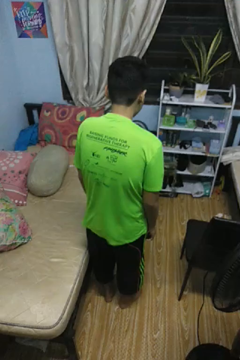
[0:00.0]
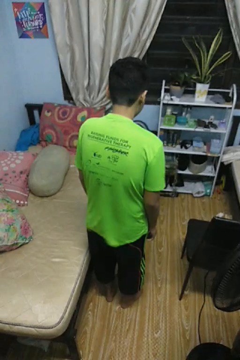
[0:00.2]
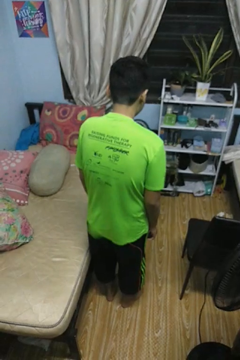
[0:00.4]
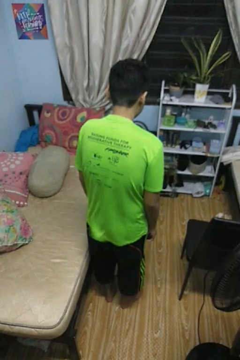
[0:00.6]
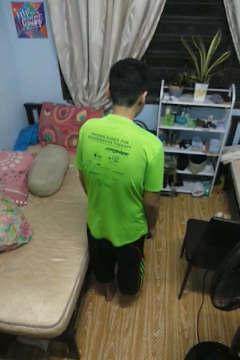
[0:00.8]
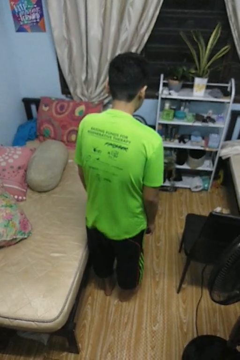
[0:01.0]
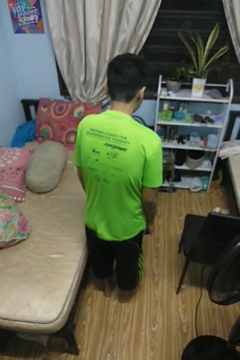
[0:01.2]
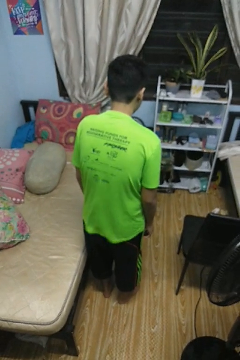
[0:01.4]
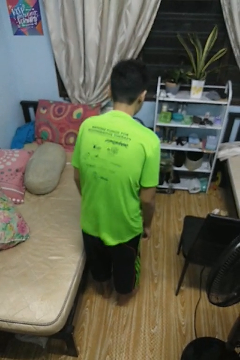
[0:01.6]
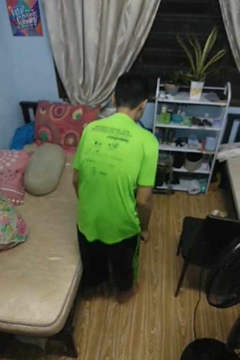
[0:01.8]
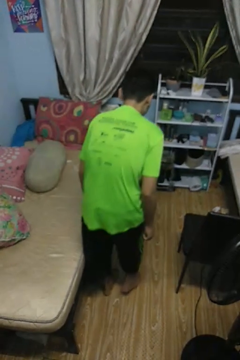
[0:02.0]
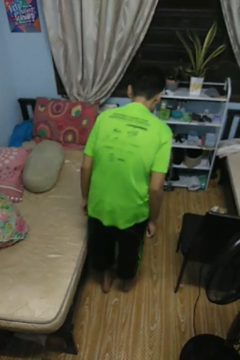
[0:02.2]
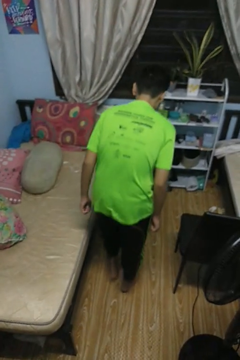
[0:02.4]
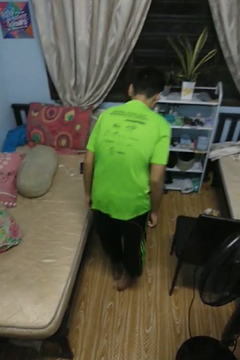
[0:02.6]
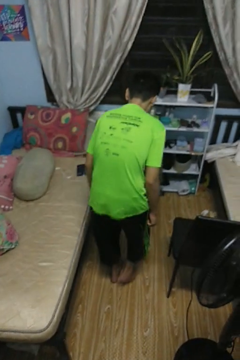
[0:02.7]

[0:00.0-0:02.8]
person walks tiptoe

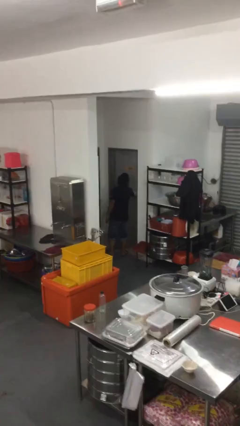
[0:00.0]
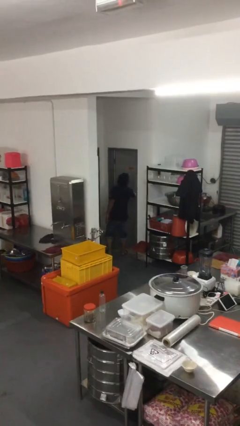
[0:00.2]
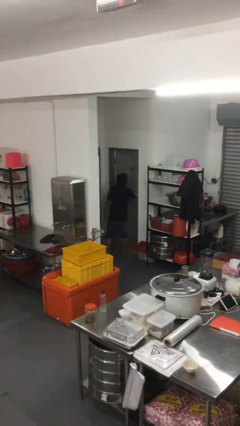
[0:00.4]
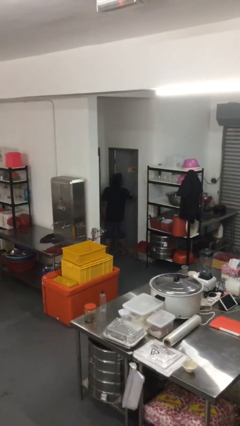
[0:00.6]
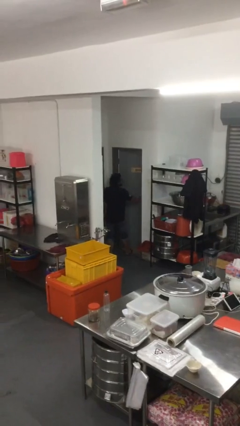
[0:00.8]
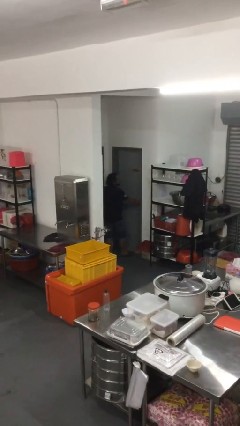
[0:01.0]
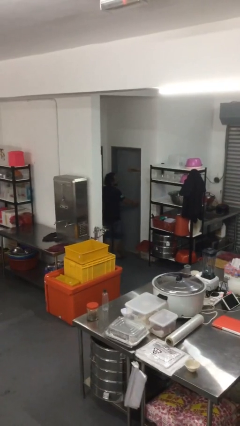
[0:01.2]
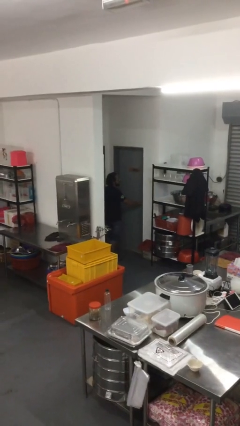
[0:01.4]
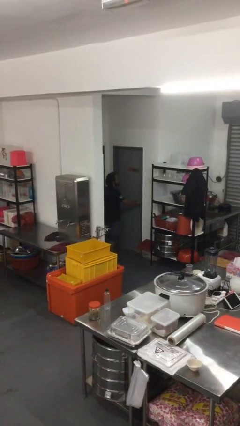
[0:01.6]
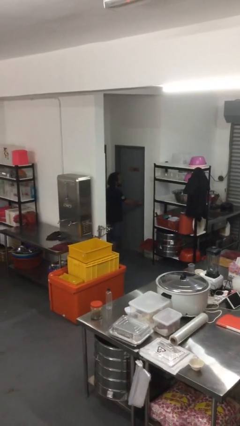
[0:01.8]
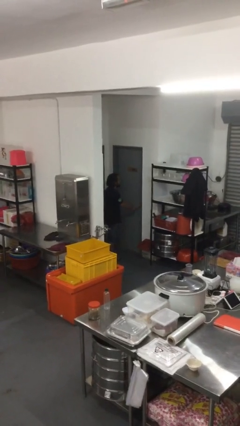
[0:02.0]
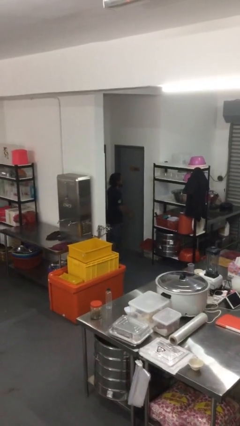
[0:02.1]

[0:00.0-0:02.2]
person closes facility door

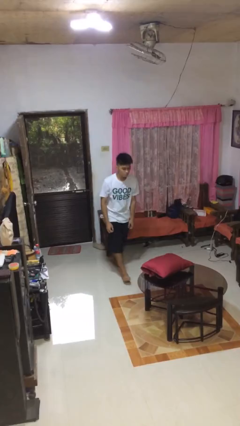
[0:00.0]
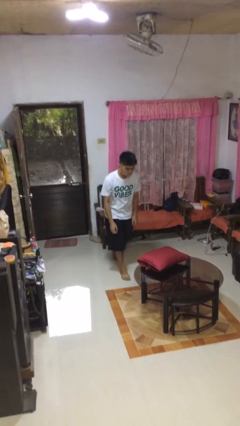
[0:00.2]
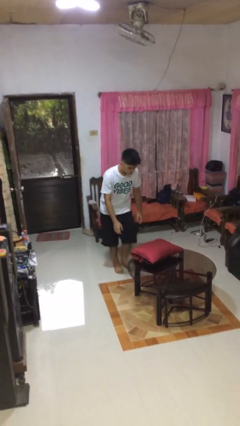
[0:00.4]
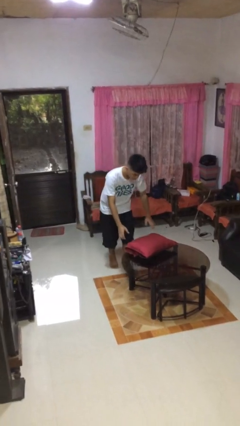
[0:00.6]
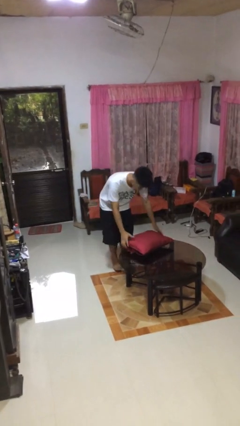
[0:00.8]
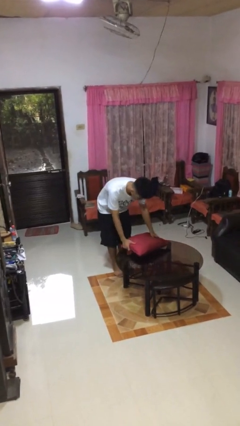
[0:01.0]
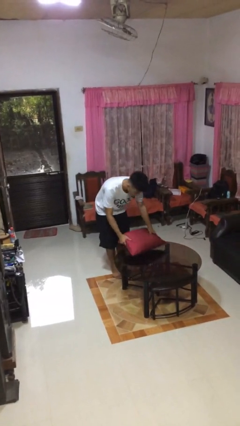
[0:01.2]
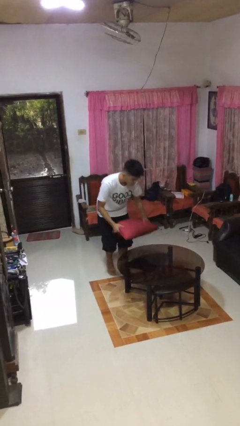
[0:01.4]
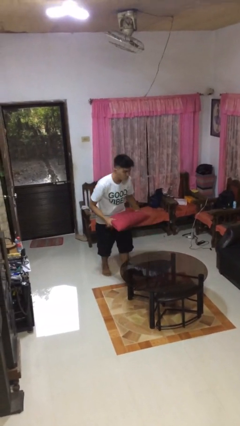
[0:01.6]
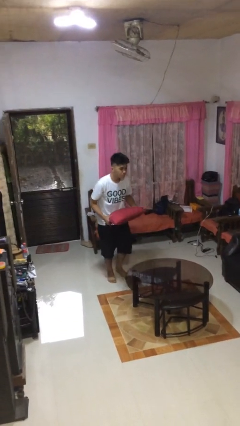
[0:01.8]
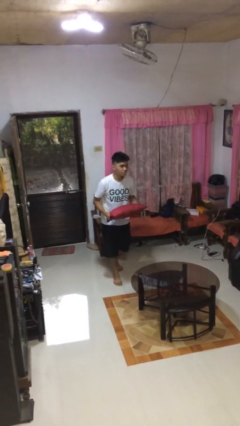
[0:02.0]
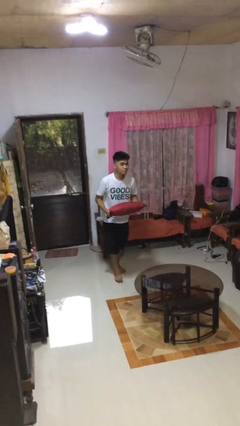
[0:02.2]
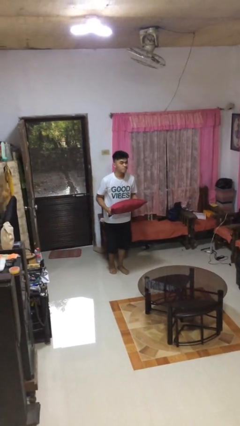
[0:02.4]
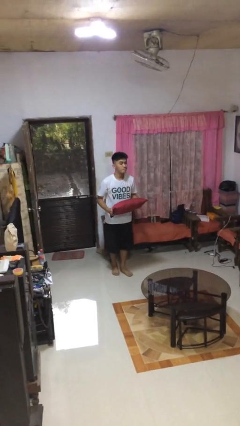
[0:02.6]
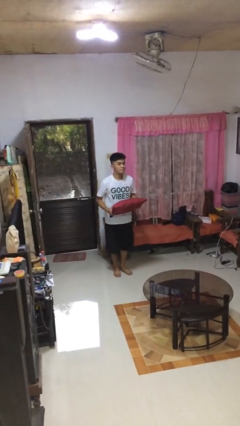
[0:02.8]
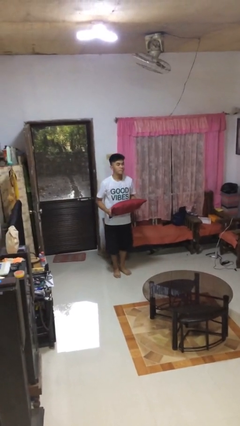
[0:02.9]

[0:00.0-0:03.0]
person picks up object from table

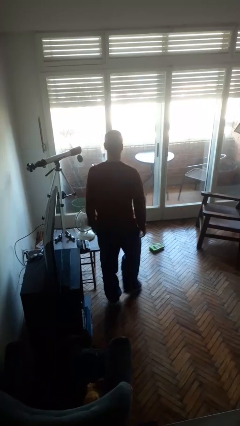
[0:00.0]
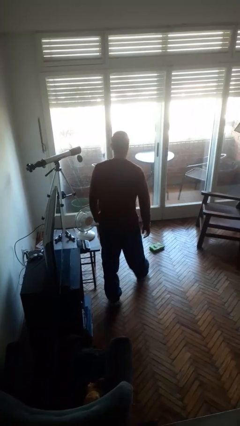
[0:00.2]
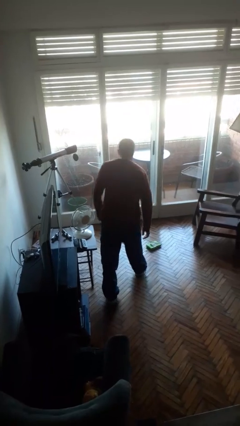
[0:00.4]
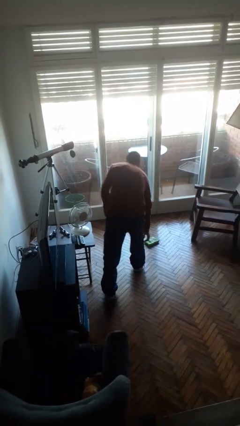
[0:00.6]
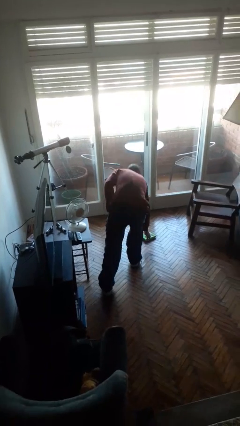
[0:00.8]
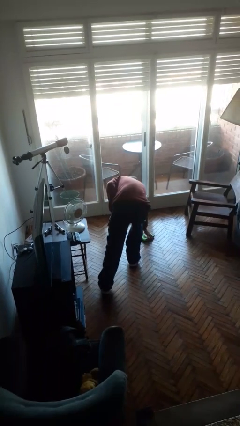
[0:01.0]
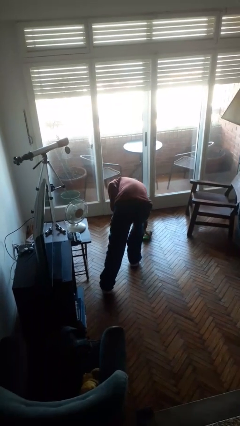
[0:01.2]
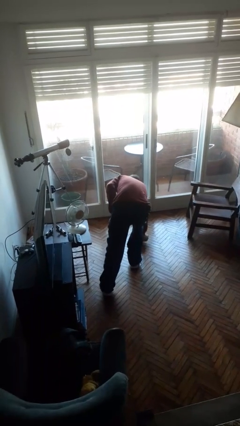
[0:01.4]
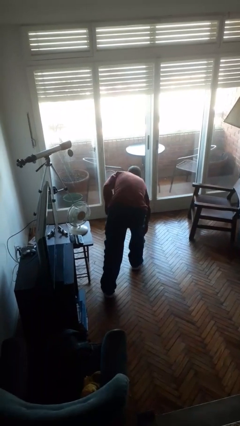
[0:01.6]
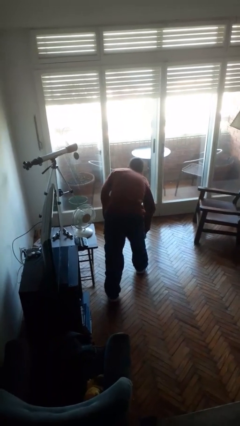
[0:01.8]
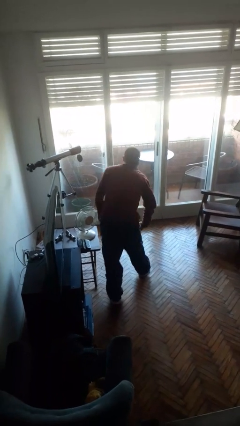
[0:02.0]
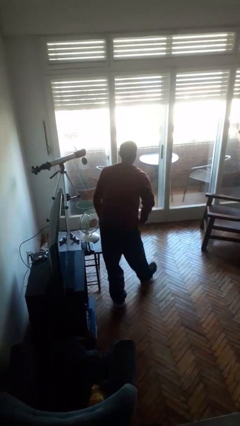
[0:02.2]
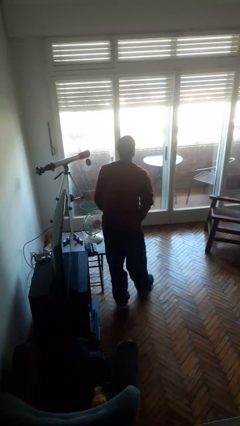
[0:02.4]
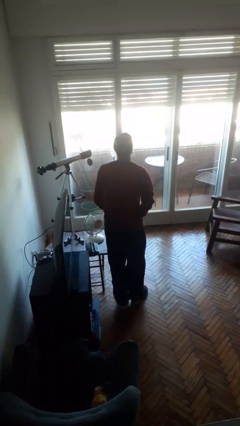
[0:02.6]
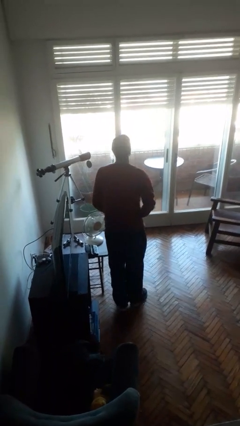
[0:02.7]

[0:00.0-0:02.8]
person picks up object from floor

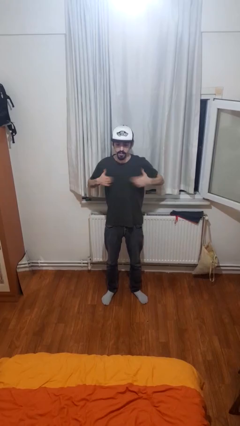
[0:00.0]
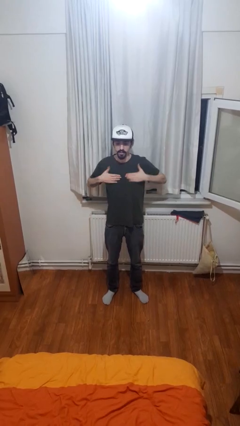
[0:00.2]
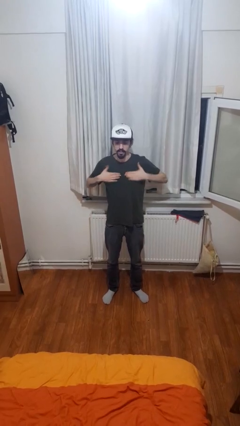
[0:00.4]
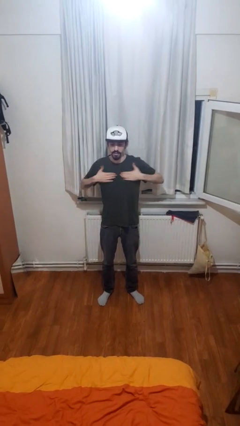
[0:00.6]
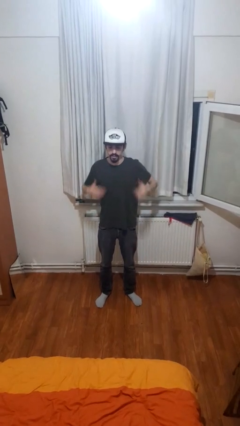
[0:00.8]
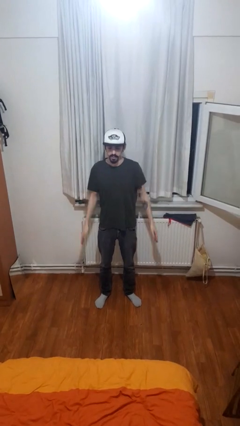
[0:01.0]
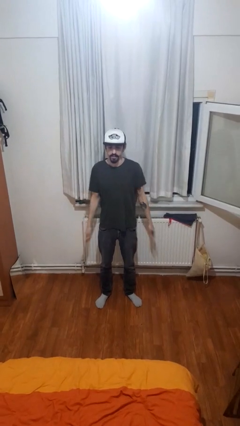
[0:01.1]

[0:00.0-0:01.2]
person drums on chest

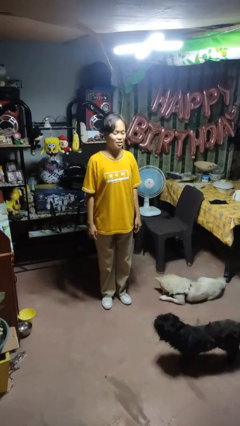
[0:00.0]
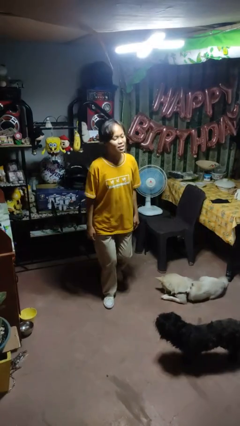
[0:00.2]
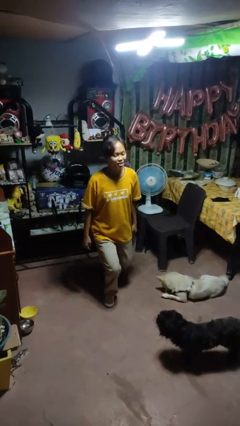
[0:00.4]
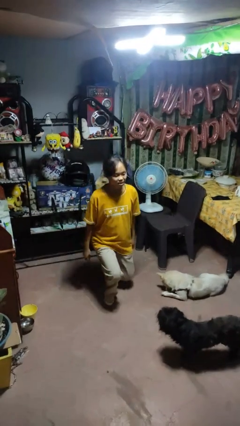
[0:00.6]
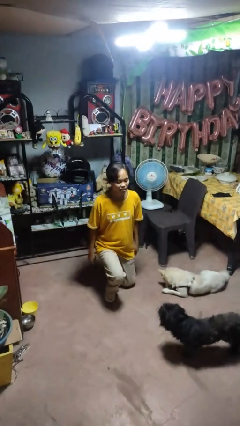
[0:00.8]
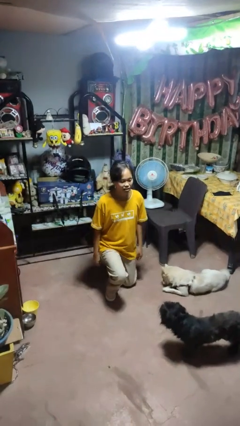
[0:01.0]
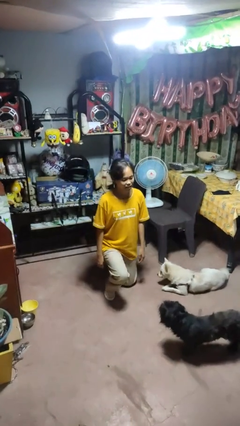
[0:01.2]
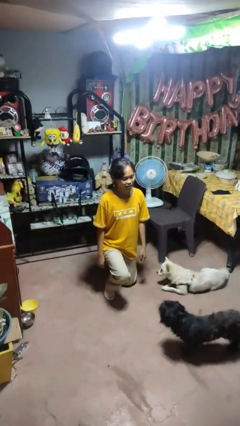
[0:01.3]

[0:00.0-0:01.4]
person kneels

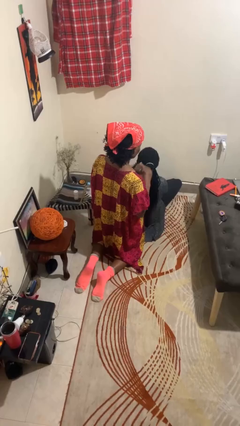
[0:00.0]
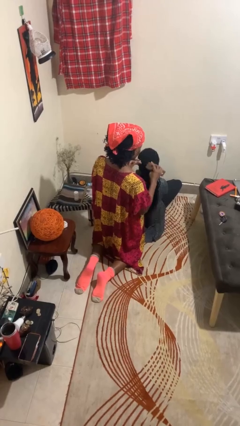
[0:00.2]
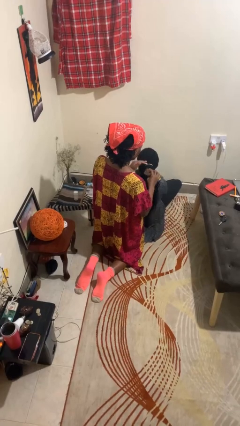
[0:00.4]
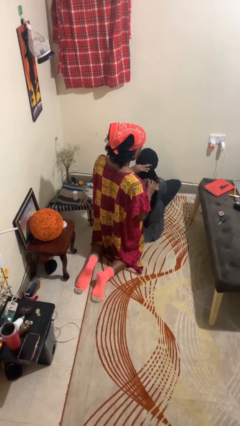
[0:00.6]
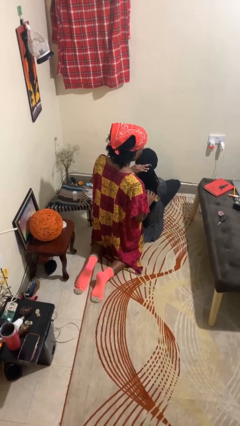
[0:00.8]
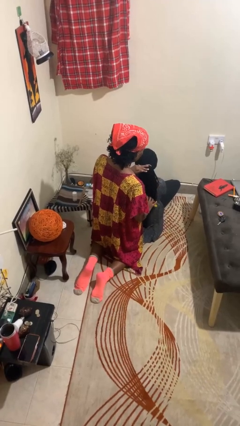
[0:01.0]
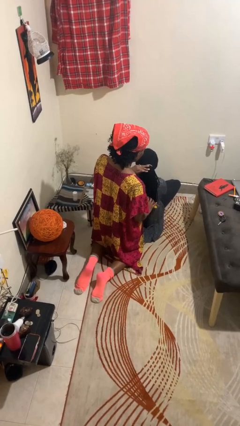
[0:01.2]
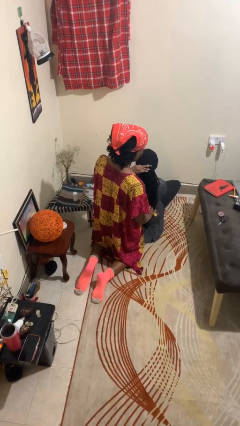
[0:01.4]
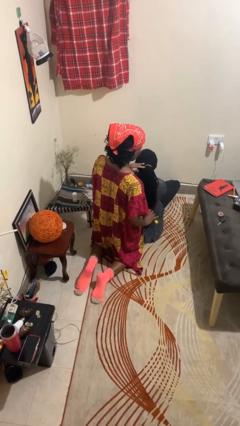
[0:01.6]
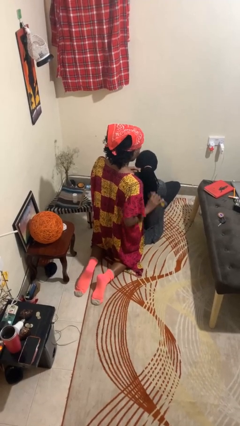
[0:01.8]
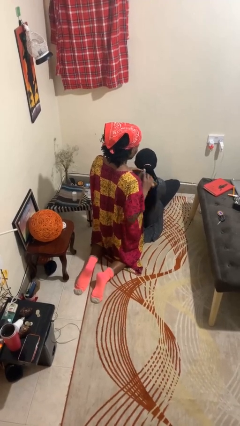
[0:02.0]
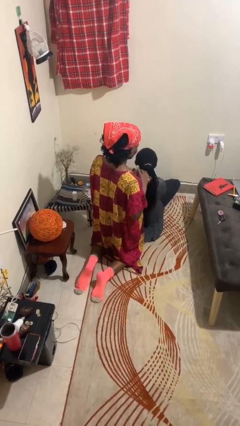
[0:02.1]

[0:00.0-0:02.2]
person brushes hair of person

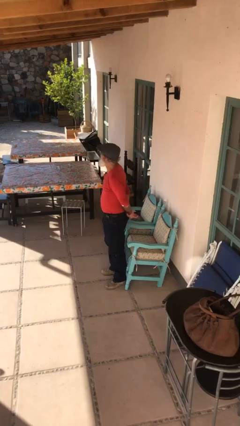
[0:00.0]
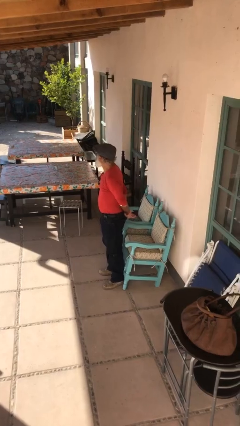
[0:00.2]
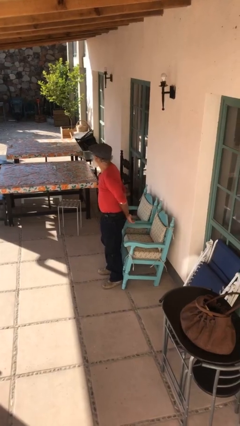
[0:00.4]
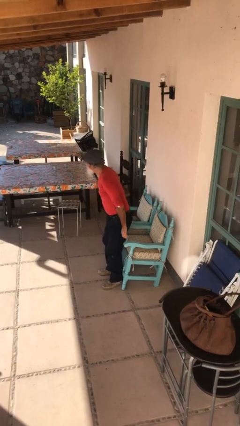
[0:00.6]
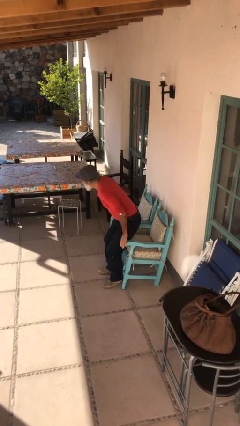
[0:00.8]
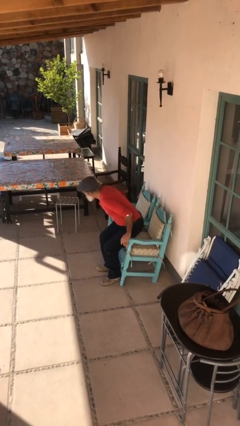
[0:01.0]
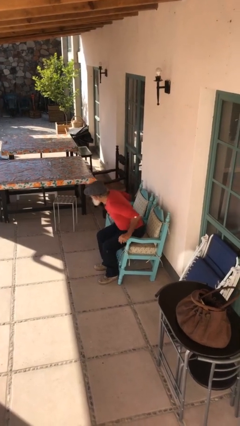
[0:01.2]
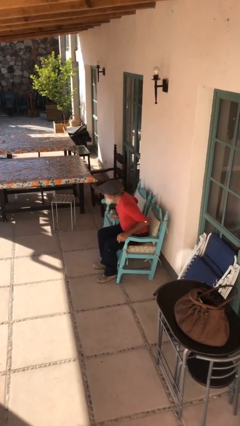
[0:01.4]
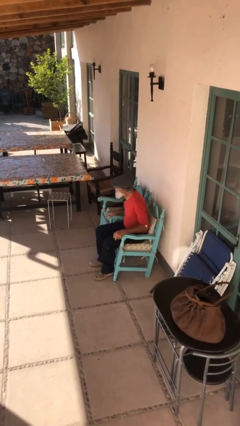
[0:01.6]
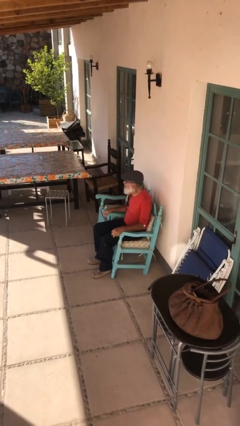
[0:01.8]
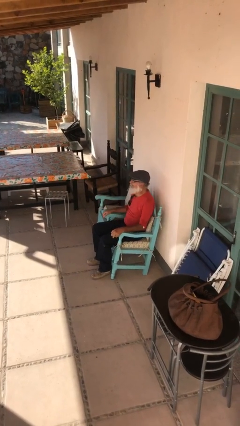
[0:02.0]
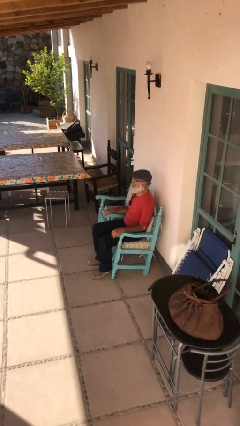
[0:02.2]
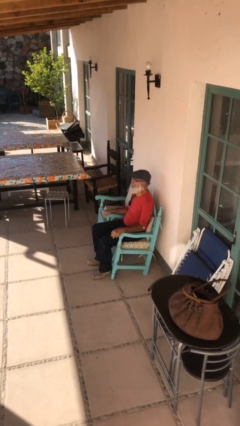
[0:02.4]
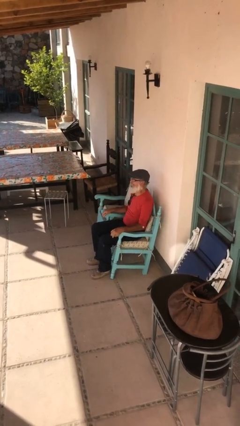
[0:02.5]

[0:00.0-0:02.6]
person sits down
